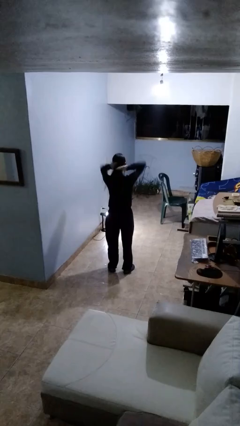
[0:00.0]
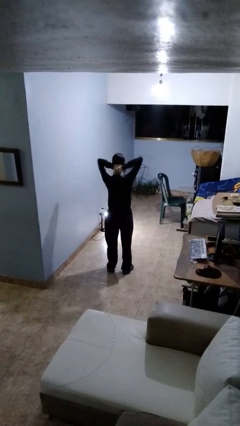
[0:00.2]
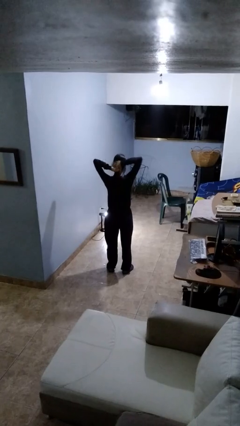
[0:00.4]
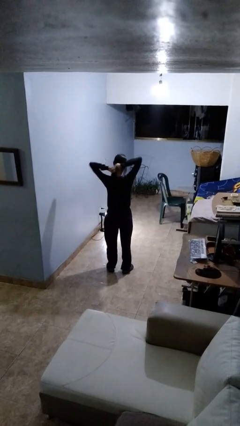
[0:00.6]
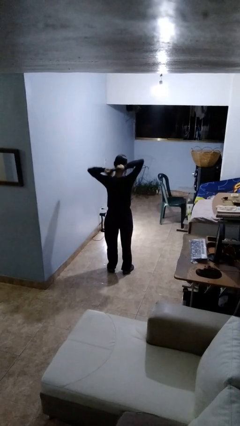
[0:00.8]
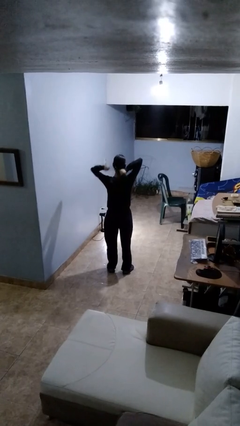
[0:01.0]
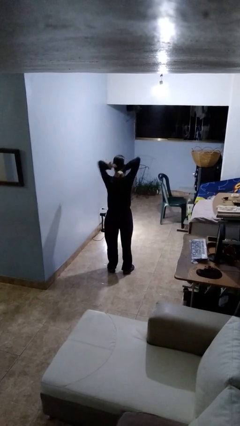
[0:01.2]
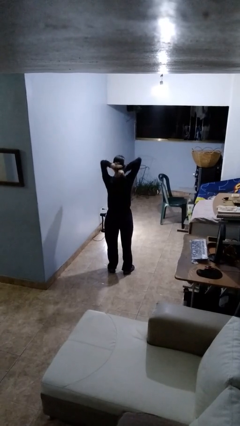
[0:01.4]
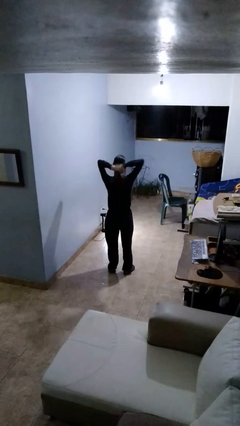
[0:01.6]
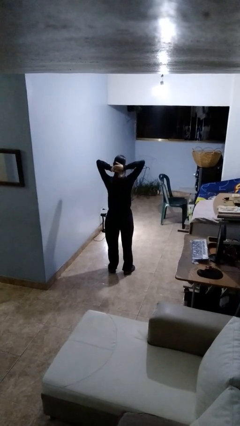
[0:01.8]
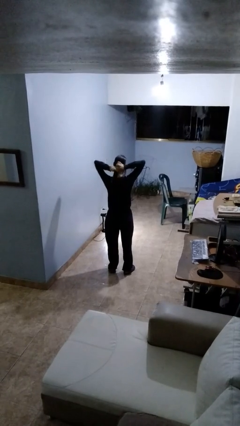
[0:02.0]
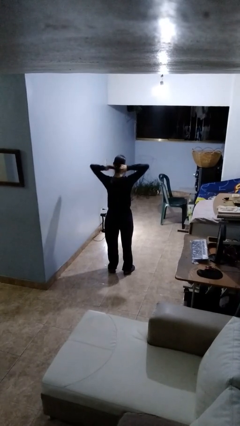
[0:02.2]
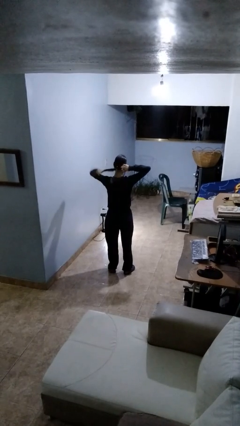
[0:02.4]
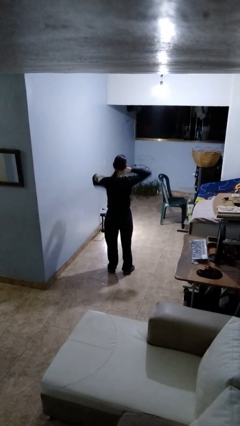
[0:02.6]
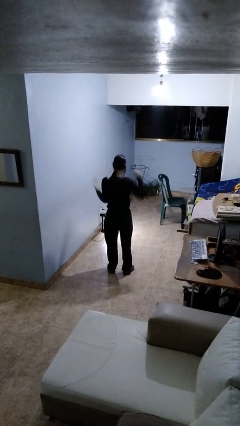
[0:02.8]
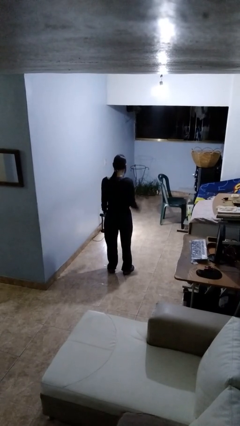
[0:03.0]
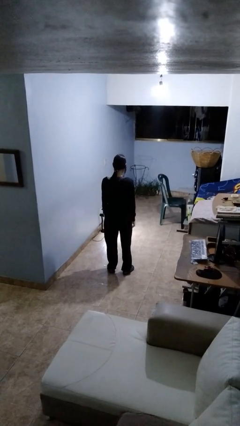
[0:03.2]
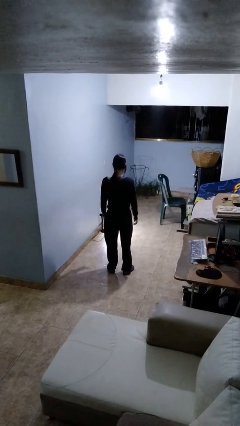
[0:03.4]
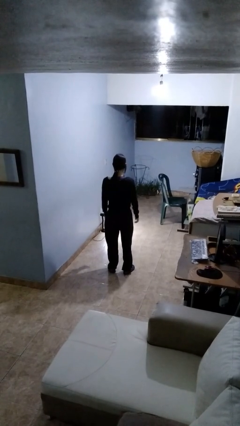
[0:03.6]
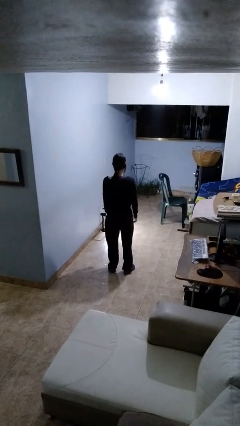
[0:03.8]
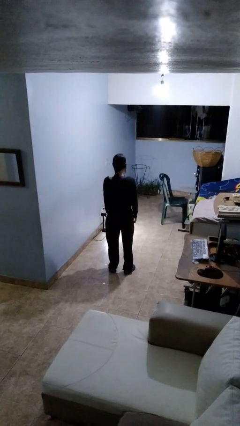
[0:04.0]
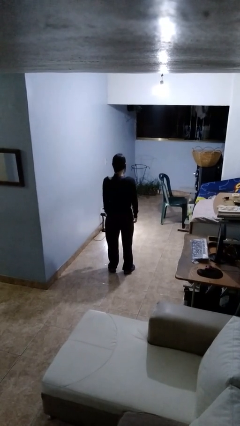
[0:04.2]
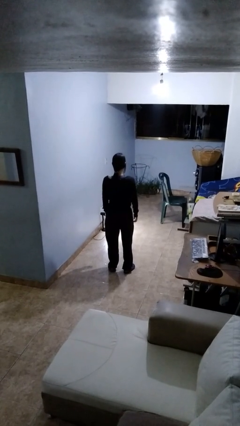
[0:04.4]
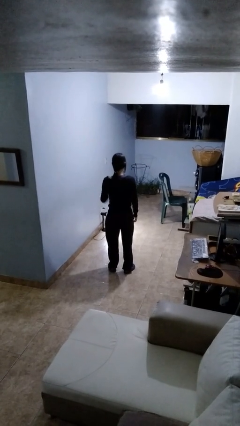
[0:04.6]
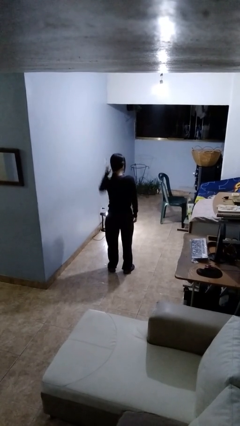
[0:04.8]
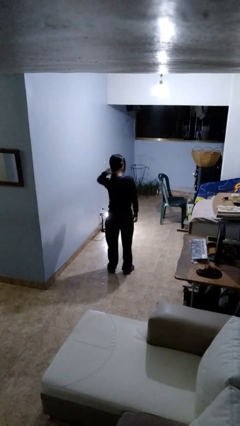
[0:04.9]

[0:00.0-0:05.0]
person puts hair in ponytail

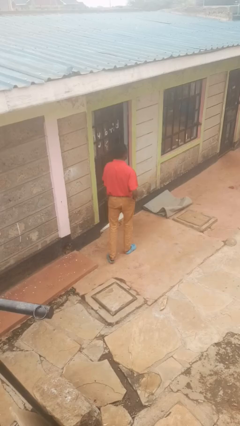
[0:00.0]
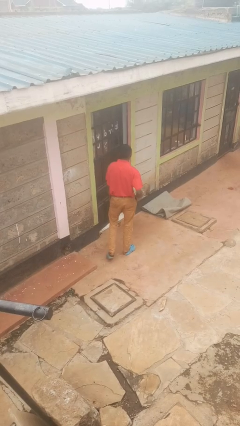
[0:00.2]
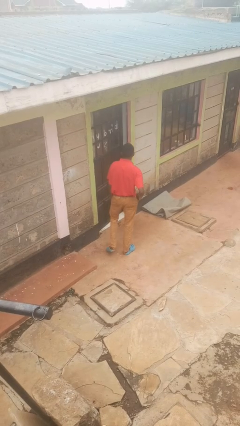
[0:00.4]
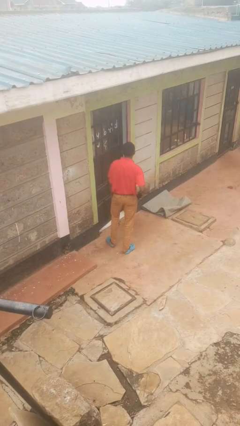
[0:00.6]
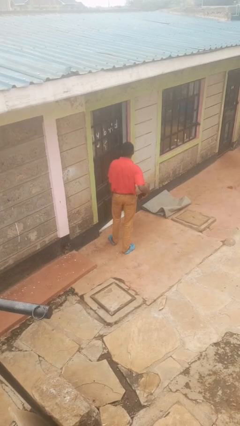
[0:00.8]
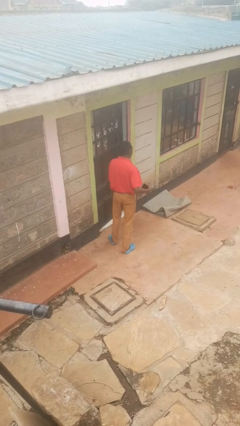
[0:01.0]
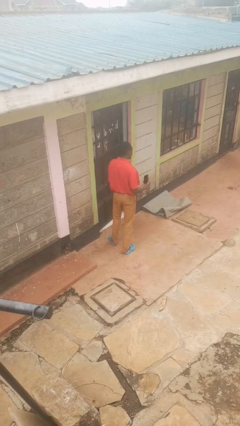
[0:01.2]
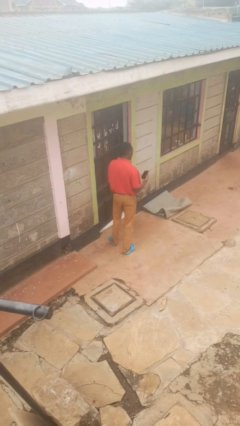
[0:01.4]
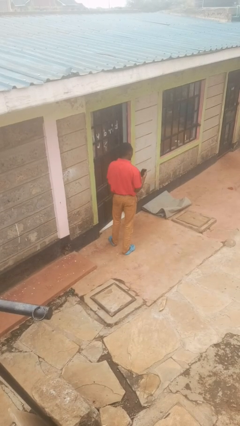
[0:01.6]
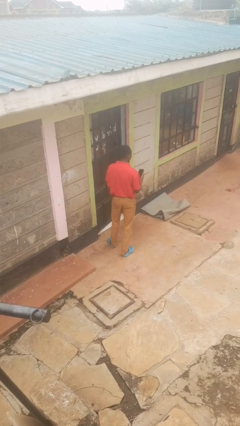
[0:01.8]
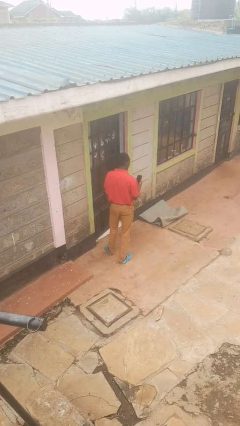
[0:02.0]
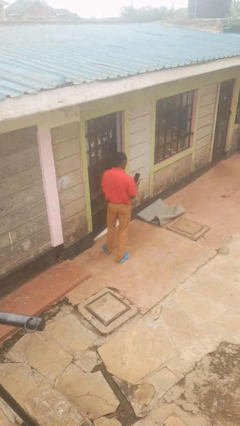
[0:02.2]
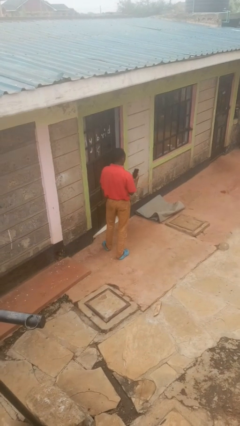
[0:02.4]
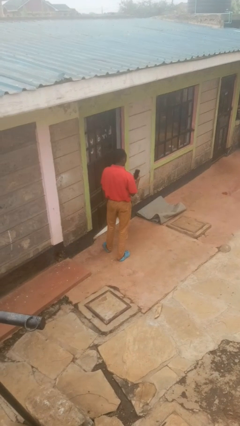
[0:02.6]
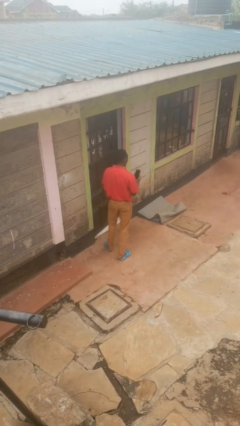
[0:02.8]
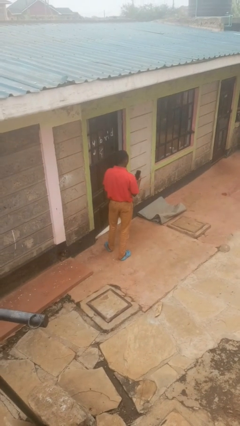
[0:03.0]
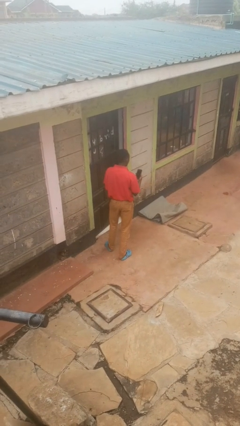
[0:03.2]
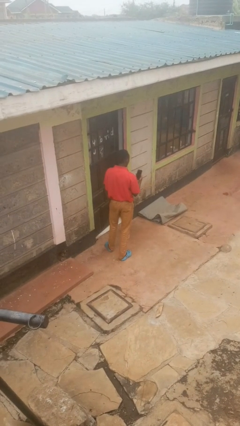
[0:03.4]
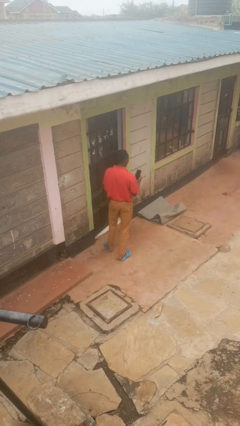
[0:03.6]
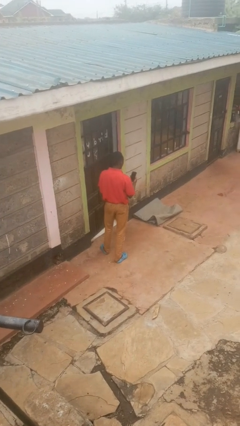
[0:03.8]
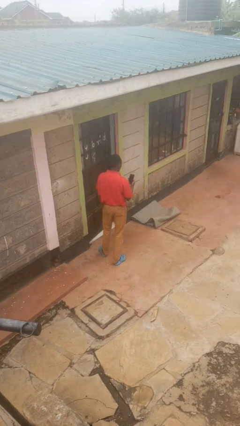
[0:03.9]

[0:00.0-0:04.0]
person takes phone from pocket

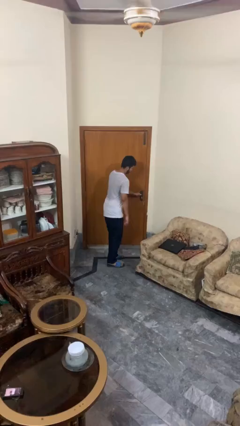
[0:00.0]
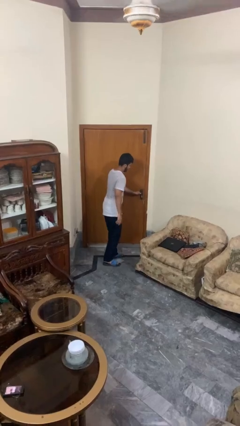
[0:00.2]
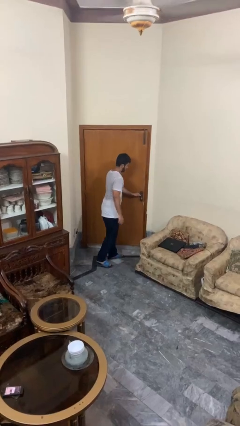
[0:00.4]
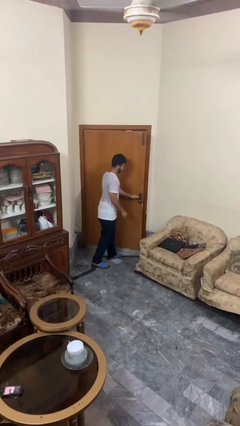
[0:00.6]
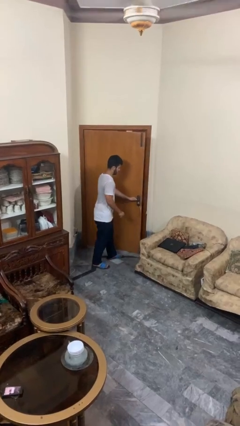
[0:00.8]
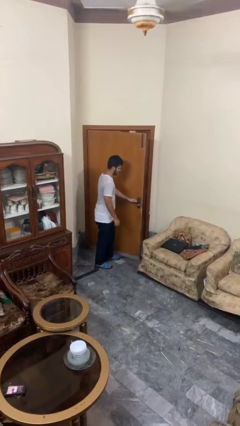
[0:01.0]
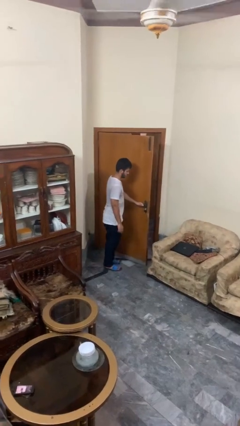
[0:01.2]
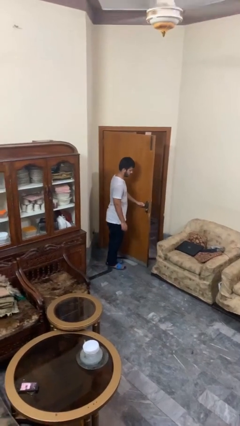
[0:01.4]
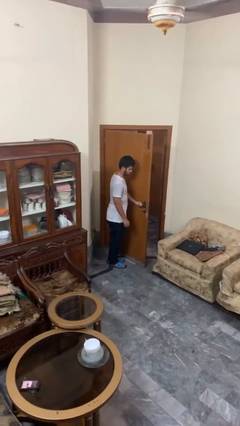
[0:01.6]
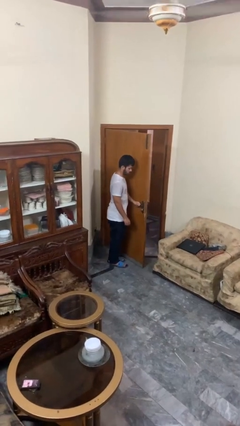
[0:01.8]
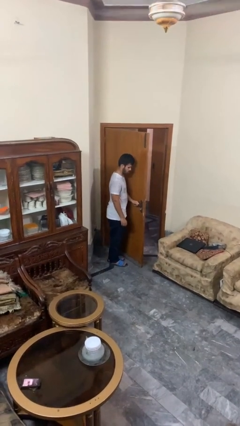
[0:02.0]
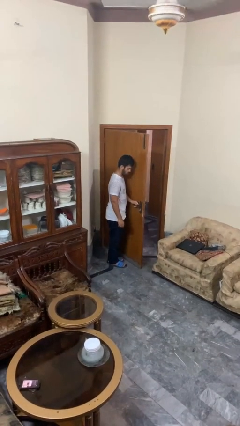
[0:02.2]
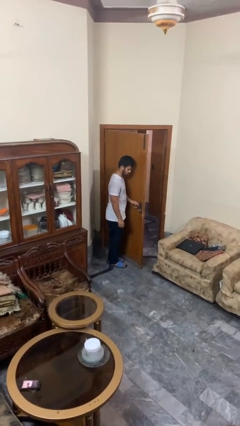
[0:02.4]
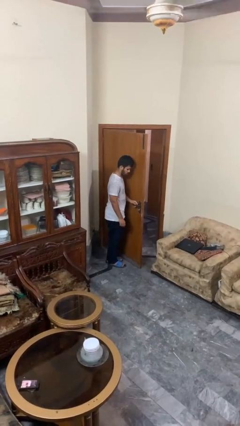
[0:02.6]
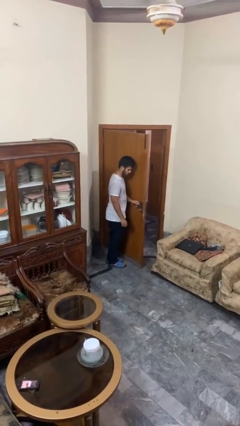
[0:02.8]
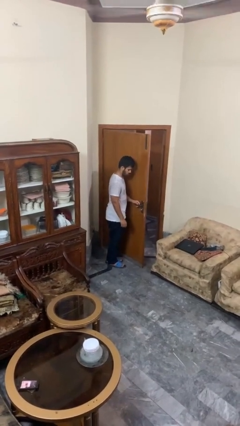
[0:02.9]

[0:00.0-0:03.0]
person opens facility door

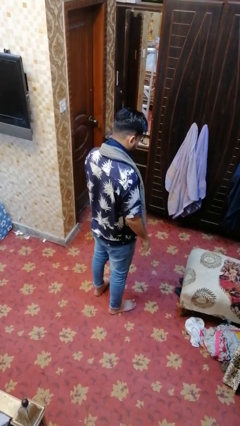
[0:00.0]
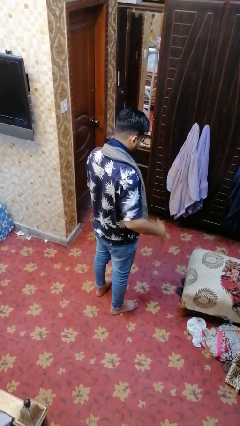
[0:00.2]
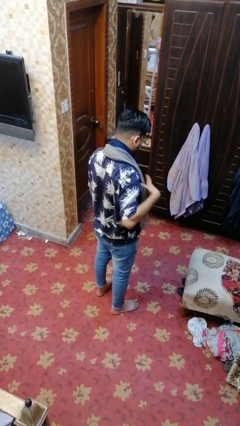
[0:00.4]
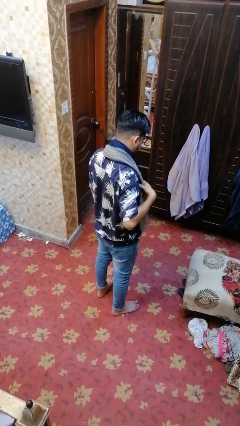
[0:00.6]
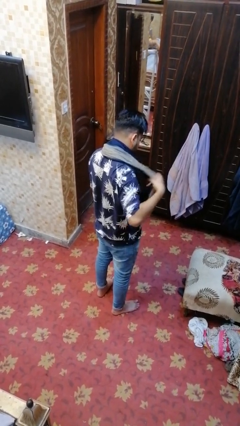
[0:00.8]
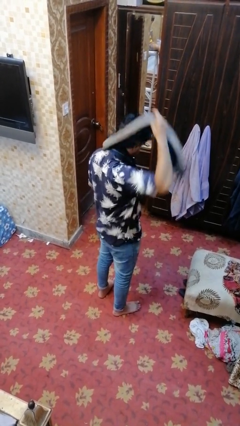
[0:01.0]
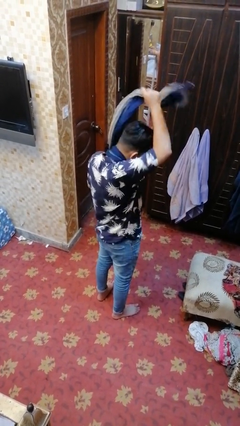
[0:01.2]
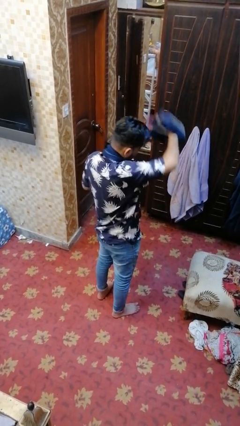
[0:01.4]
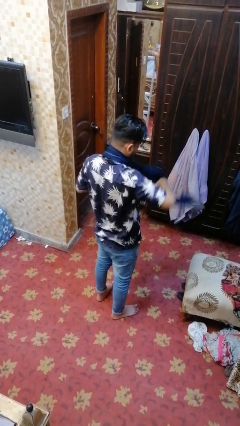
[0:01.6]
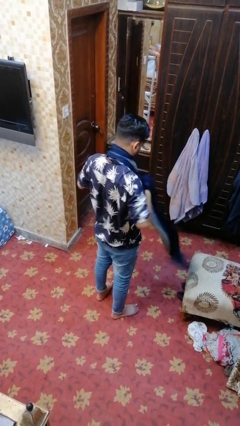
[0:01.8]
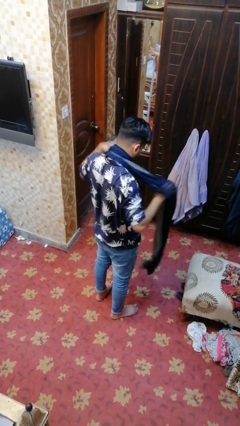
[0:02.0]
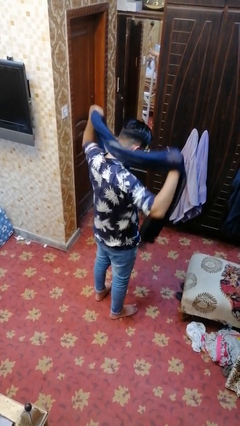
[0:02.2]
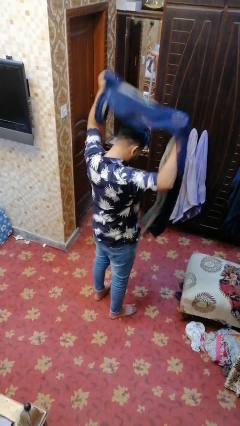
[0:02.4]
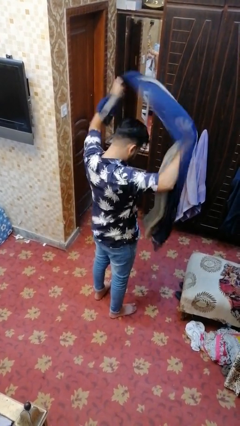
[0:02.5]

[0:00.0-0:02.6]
person takes off scarf

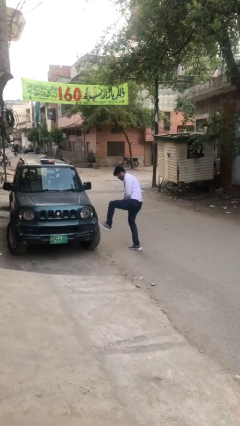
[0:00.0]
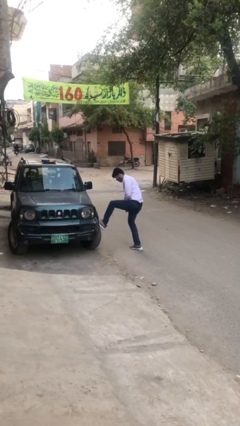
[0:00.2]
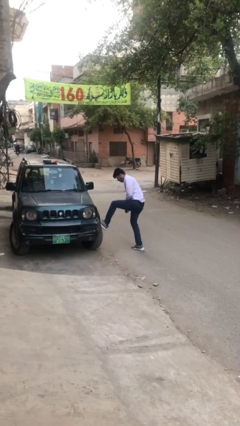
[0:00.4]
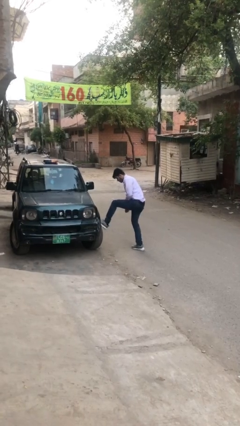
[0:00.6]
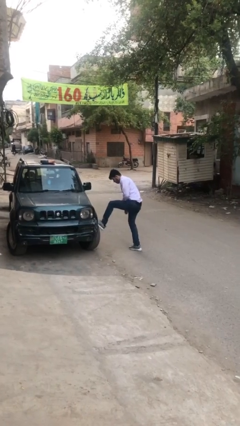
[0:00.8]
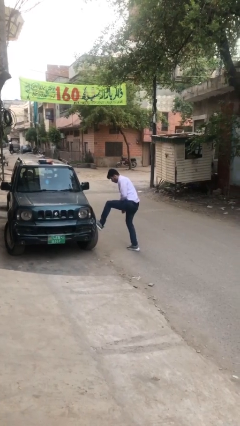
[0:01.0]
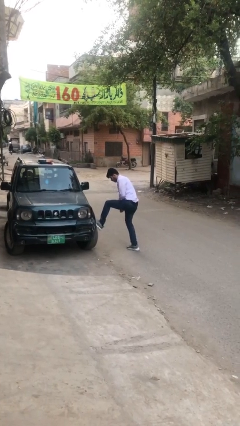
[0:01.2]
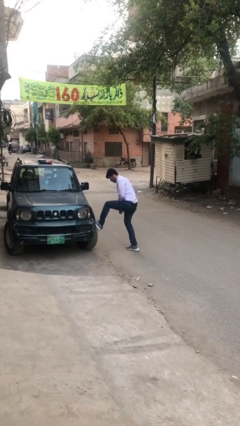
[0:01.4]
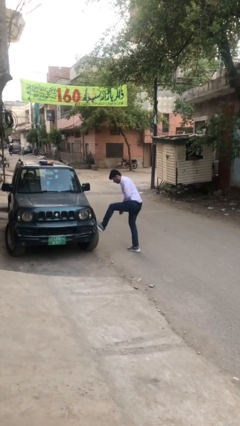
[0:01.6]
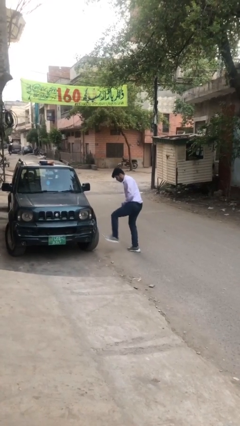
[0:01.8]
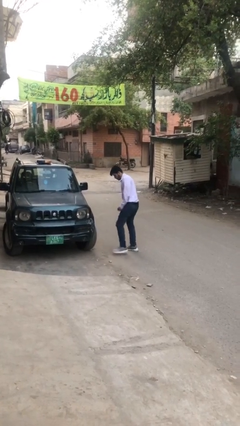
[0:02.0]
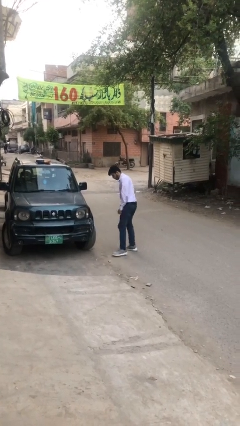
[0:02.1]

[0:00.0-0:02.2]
person kicks car tires

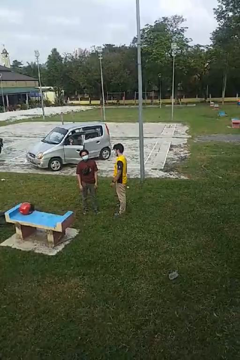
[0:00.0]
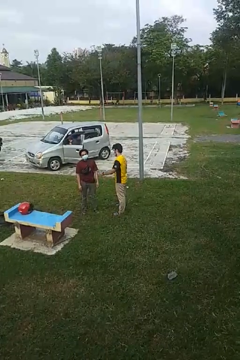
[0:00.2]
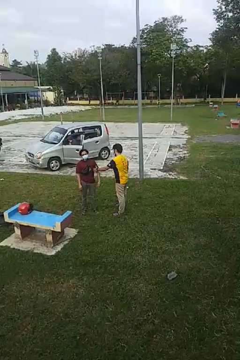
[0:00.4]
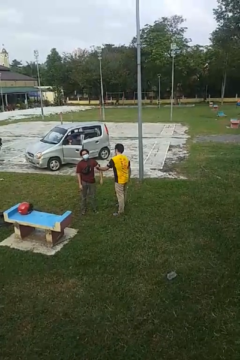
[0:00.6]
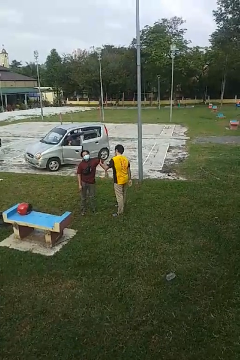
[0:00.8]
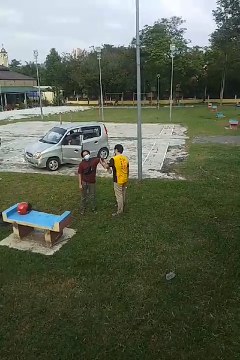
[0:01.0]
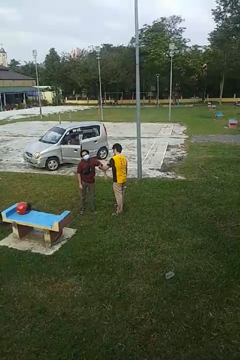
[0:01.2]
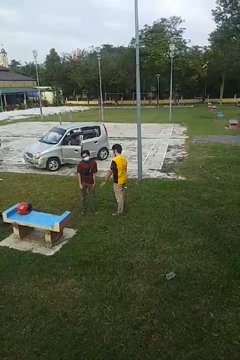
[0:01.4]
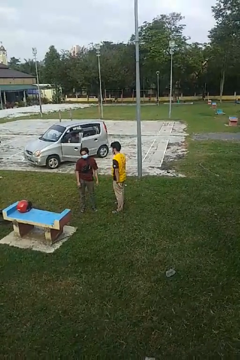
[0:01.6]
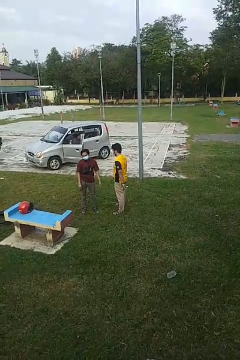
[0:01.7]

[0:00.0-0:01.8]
person grabs person by bicep
